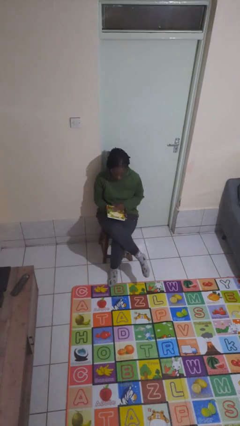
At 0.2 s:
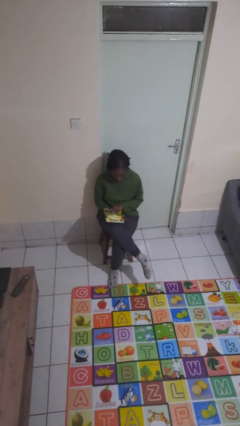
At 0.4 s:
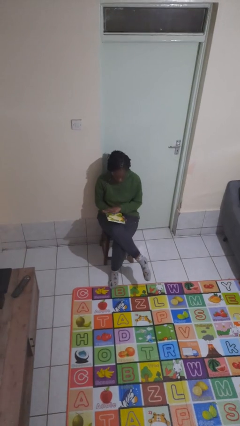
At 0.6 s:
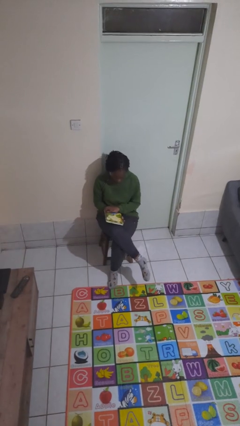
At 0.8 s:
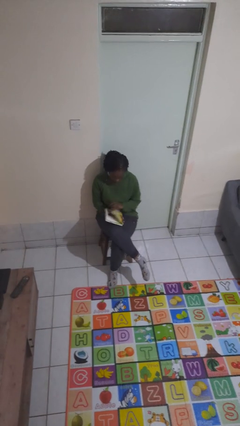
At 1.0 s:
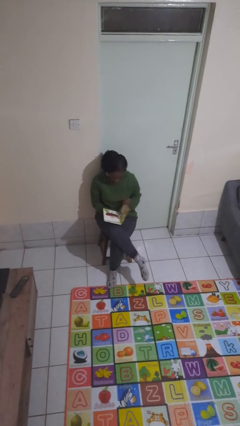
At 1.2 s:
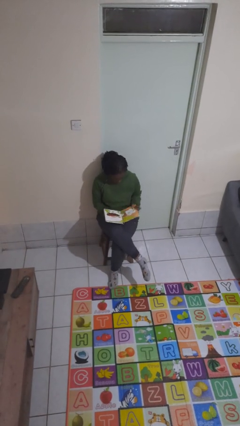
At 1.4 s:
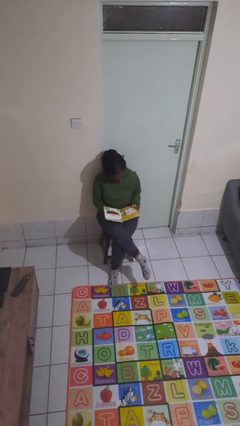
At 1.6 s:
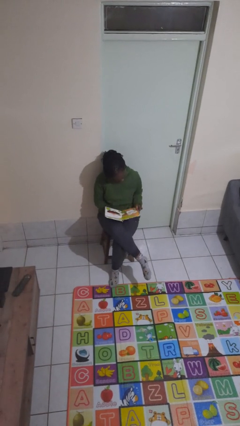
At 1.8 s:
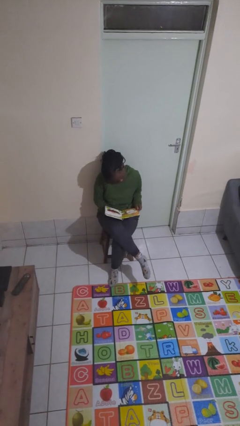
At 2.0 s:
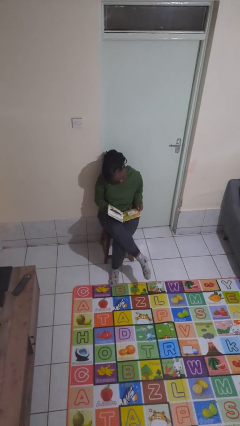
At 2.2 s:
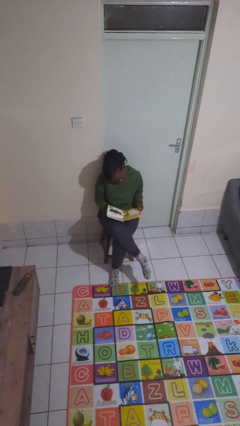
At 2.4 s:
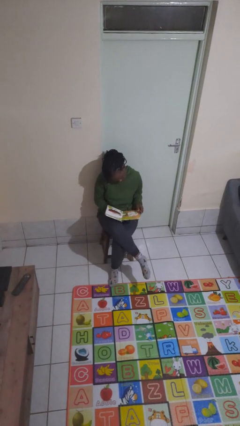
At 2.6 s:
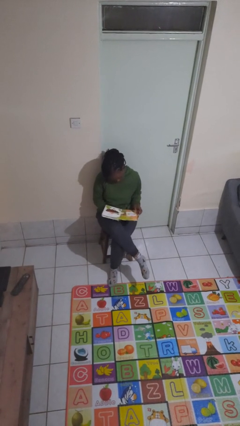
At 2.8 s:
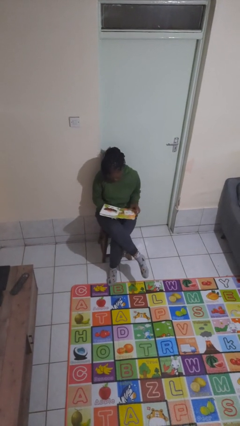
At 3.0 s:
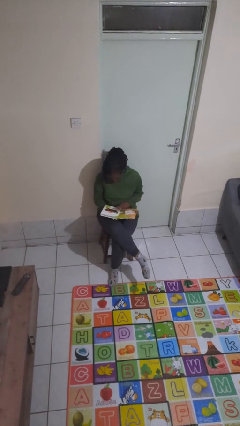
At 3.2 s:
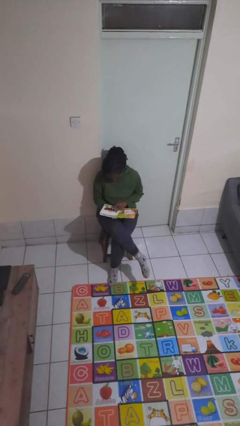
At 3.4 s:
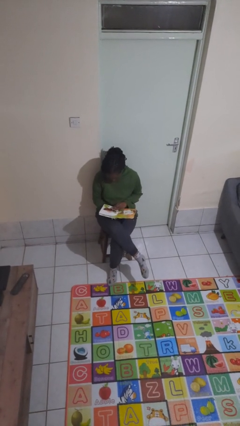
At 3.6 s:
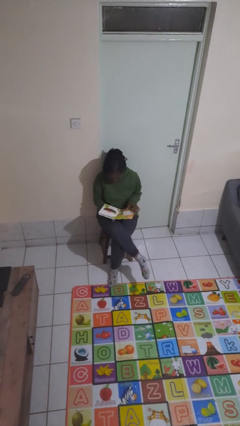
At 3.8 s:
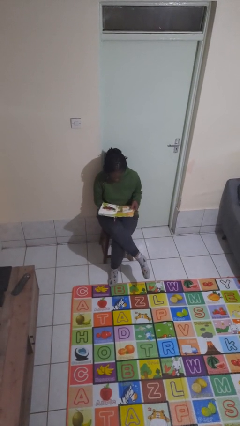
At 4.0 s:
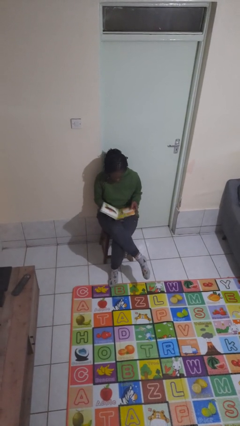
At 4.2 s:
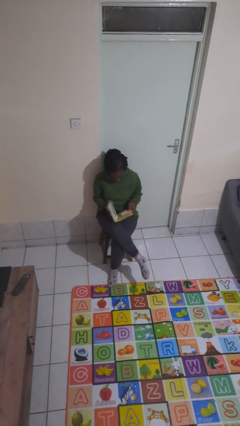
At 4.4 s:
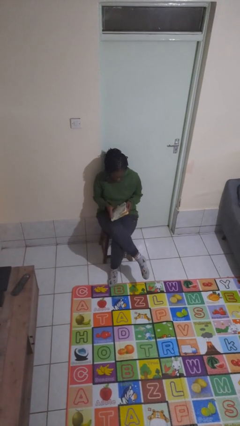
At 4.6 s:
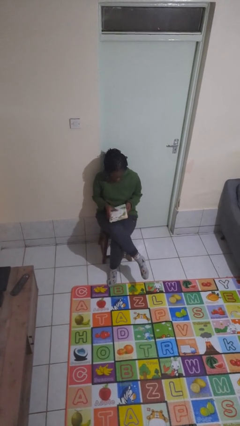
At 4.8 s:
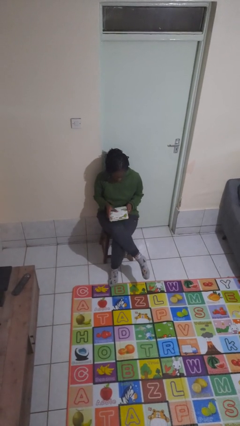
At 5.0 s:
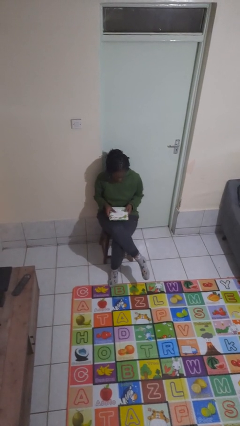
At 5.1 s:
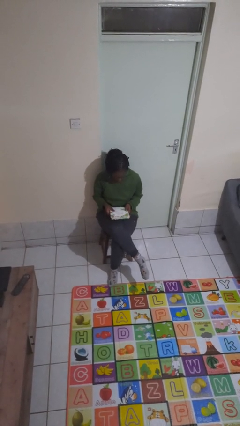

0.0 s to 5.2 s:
person reads book

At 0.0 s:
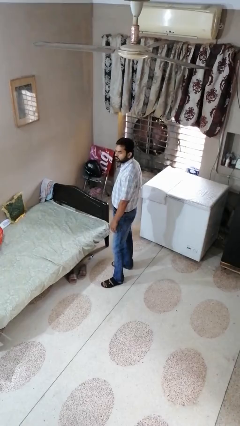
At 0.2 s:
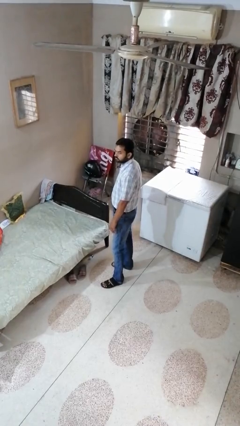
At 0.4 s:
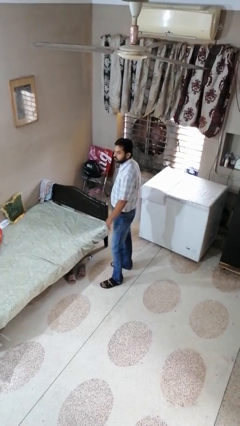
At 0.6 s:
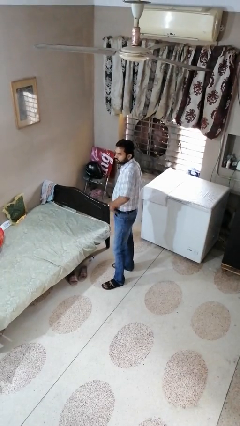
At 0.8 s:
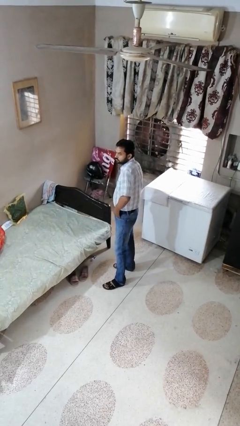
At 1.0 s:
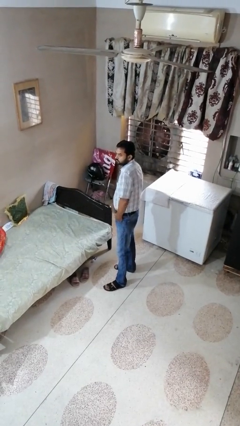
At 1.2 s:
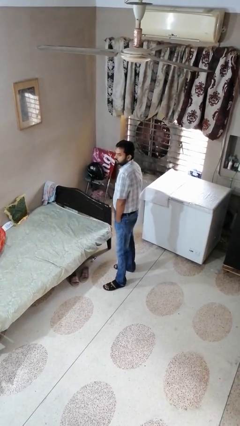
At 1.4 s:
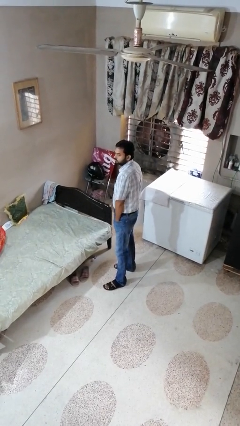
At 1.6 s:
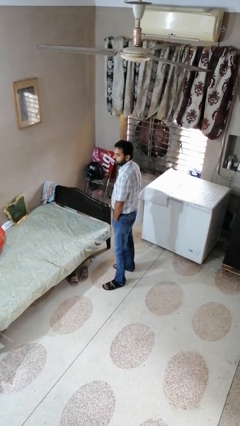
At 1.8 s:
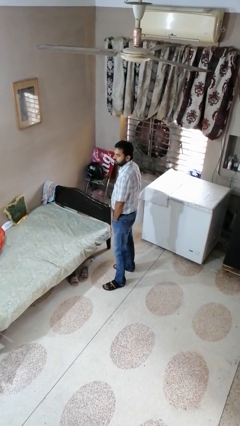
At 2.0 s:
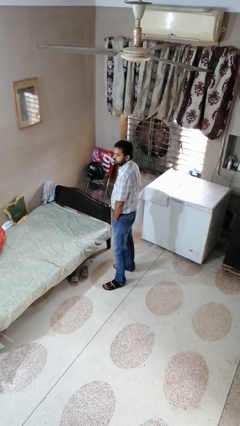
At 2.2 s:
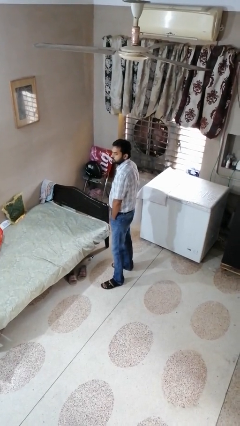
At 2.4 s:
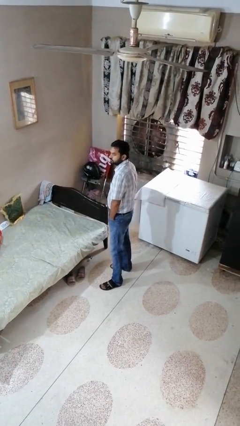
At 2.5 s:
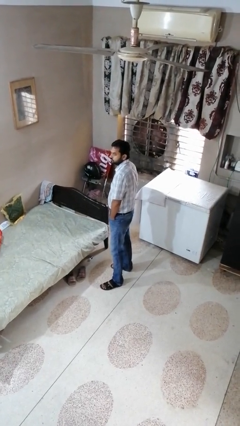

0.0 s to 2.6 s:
person puts hands in back pockets

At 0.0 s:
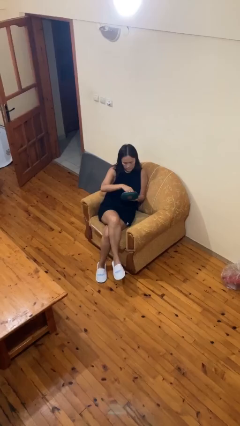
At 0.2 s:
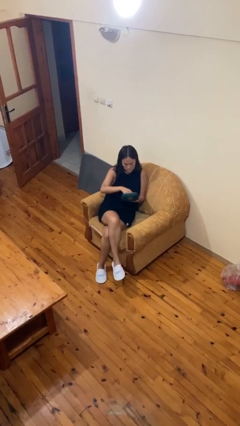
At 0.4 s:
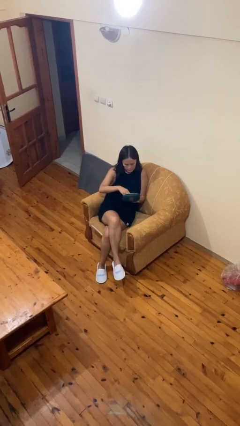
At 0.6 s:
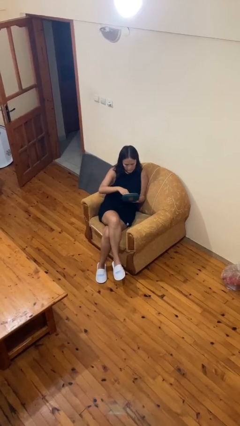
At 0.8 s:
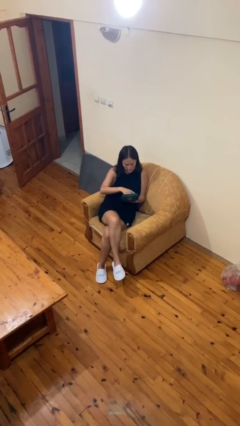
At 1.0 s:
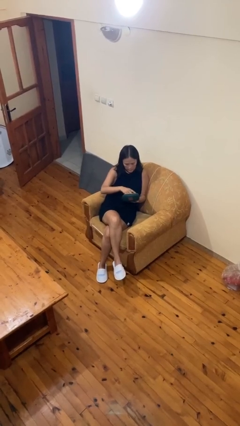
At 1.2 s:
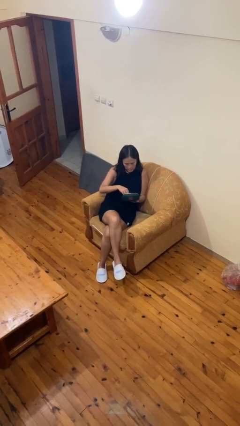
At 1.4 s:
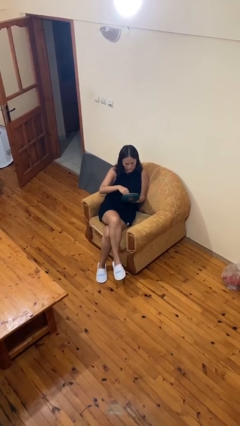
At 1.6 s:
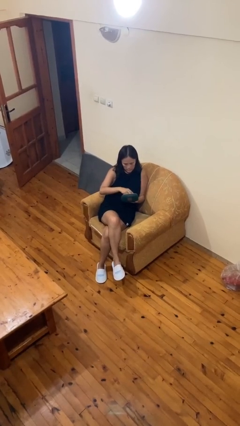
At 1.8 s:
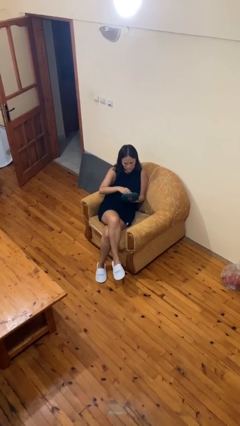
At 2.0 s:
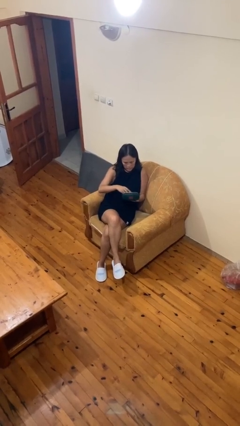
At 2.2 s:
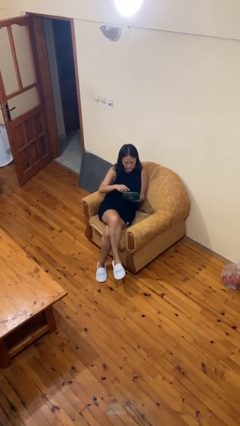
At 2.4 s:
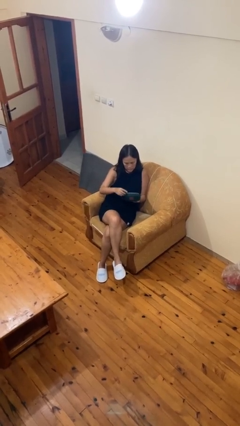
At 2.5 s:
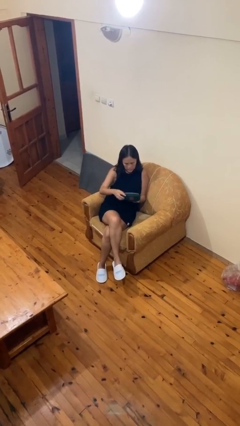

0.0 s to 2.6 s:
person searches jewelry box

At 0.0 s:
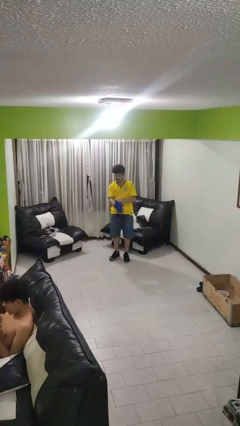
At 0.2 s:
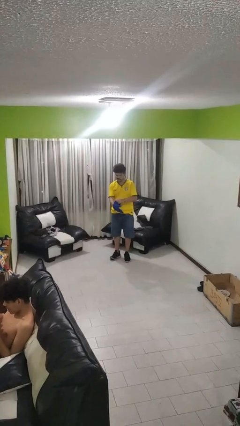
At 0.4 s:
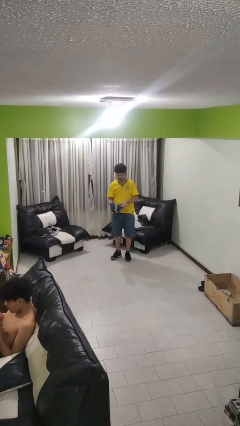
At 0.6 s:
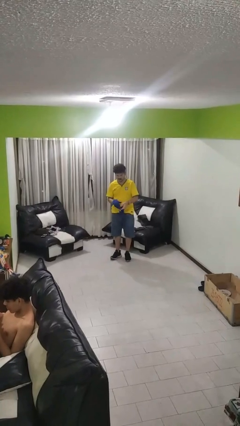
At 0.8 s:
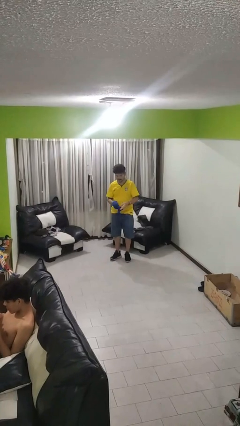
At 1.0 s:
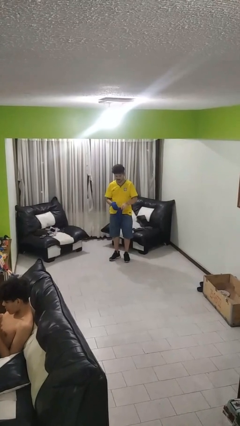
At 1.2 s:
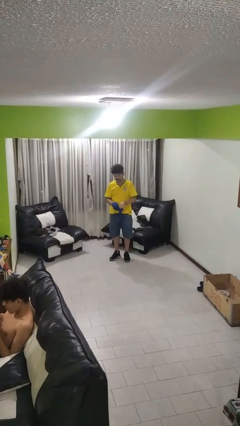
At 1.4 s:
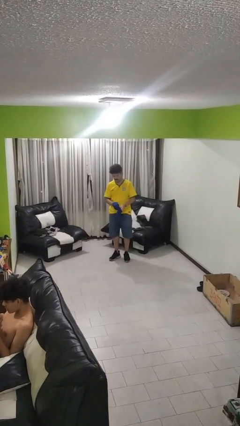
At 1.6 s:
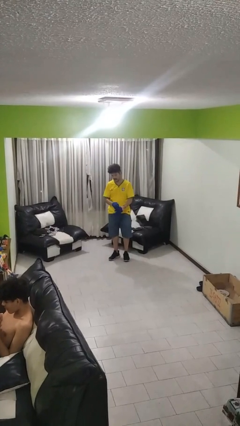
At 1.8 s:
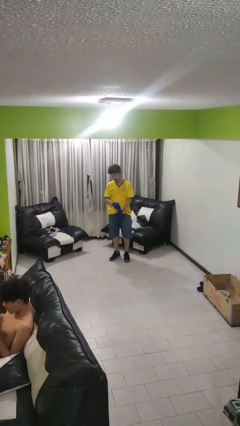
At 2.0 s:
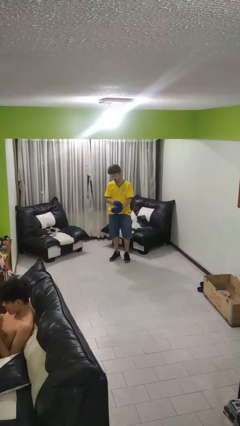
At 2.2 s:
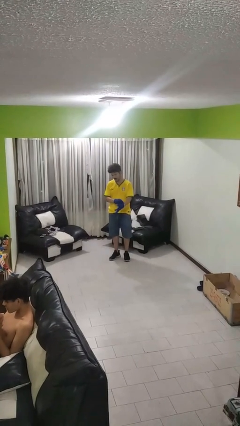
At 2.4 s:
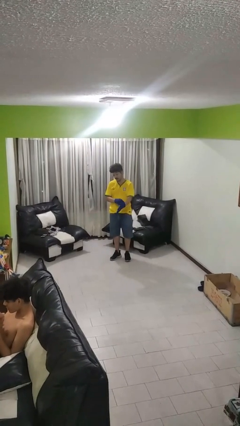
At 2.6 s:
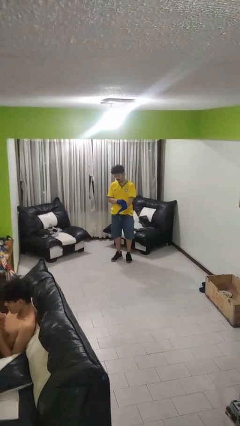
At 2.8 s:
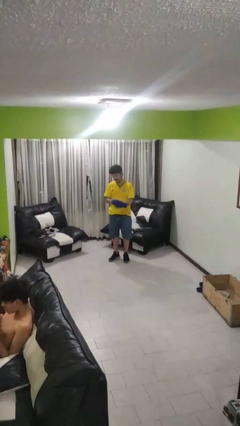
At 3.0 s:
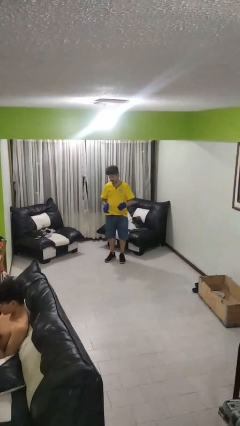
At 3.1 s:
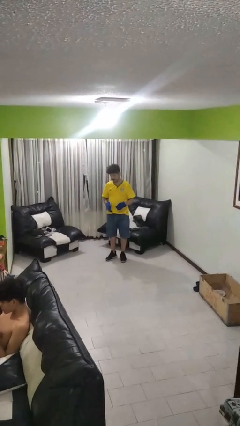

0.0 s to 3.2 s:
person puts on gloves

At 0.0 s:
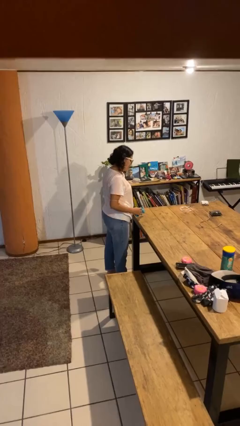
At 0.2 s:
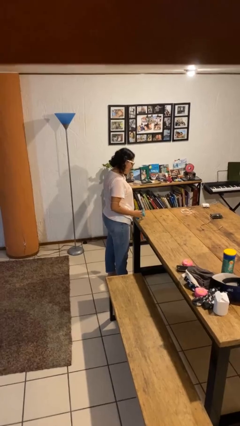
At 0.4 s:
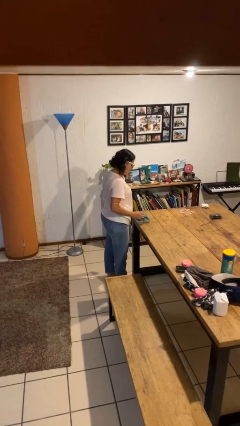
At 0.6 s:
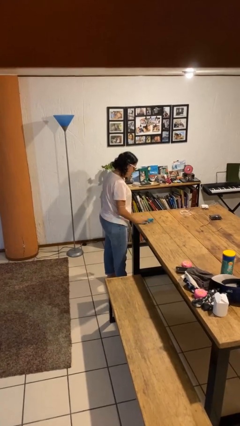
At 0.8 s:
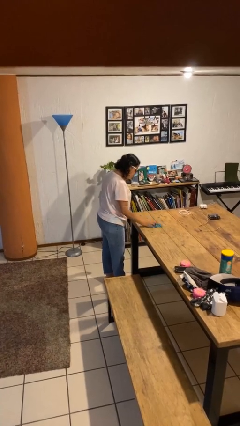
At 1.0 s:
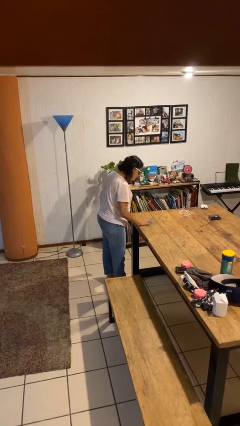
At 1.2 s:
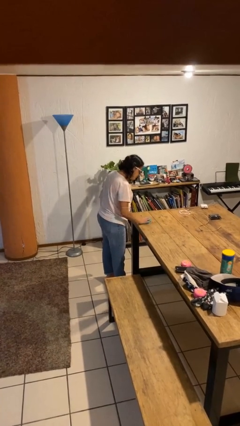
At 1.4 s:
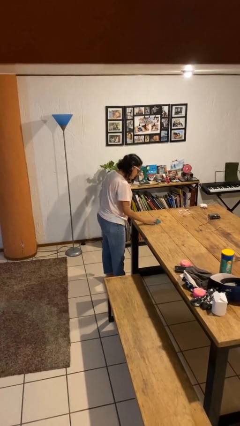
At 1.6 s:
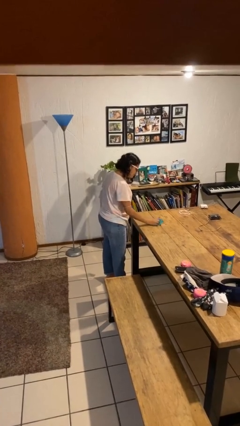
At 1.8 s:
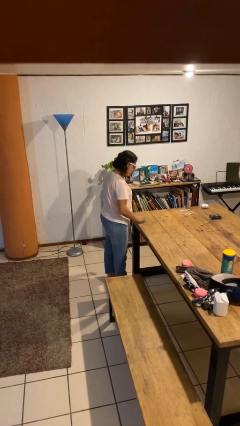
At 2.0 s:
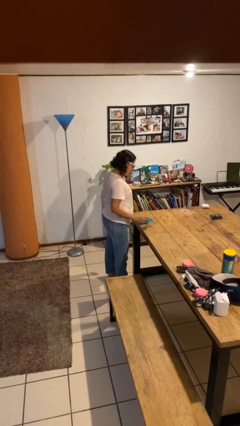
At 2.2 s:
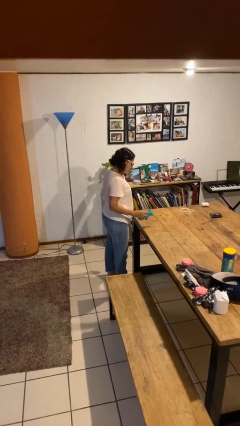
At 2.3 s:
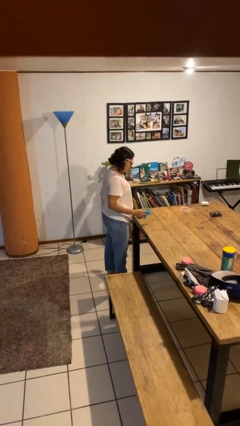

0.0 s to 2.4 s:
person cleans table with rag

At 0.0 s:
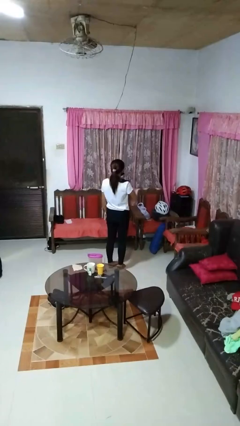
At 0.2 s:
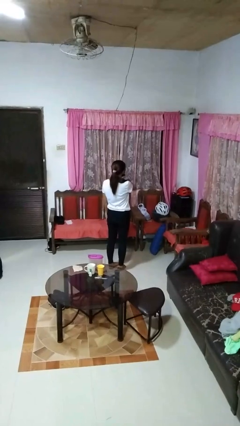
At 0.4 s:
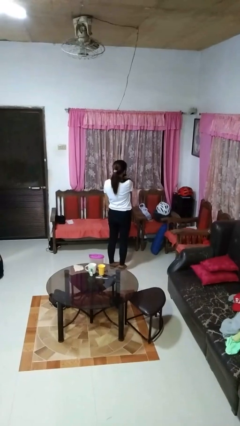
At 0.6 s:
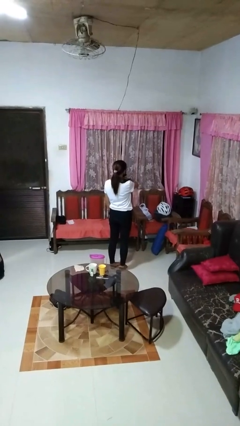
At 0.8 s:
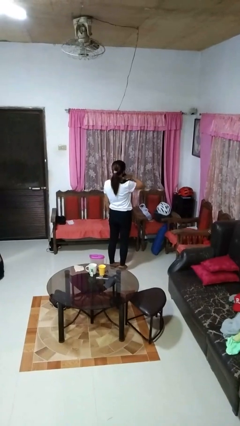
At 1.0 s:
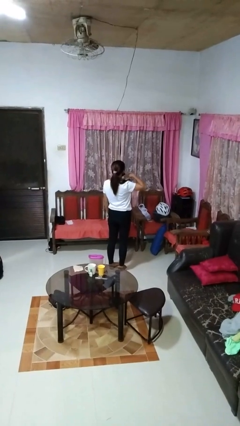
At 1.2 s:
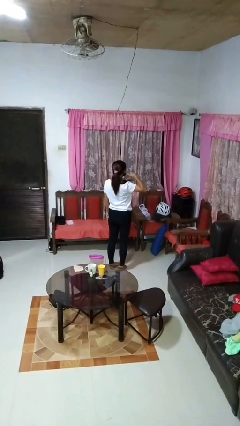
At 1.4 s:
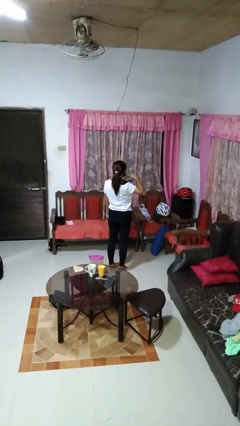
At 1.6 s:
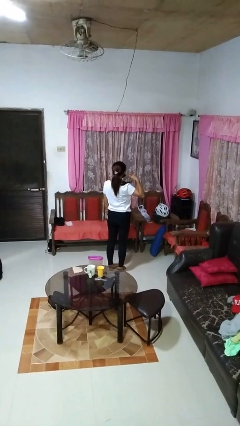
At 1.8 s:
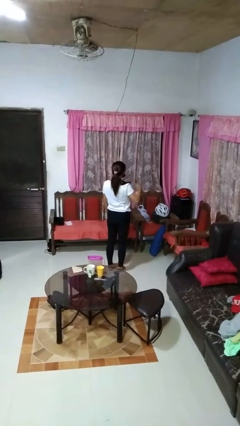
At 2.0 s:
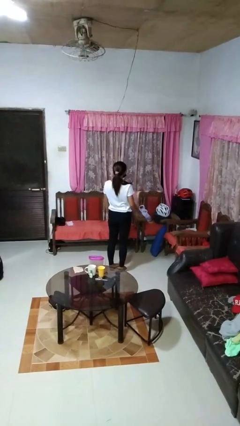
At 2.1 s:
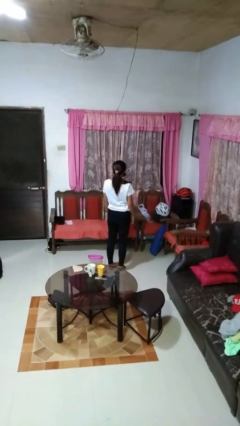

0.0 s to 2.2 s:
person gestures cut
